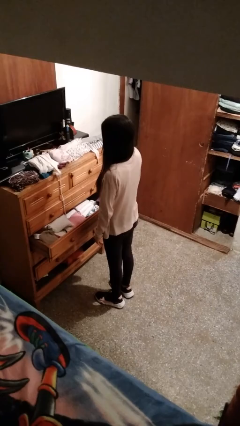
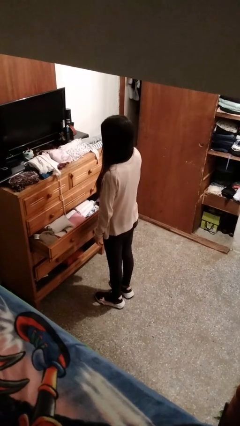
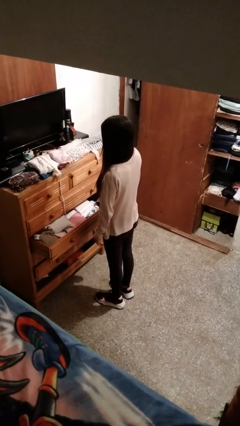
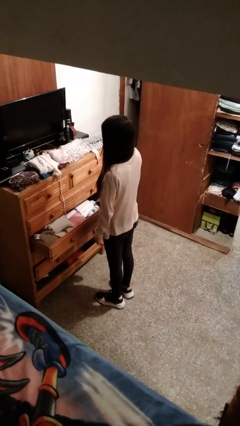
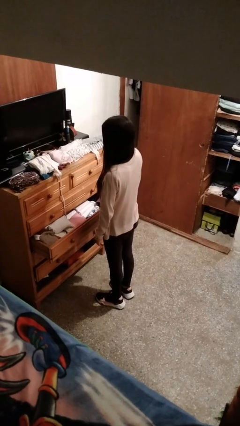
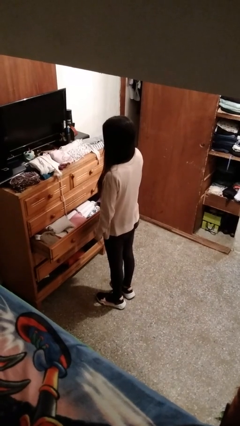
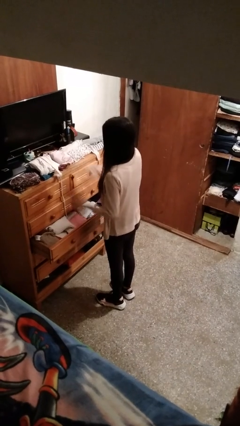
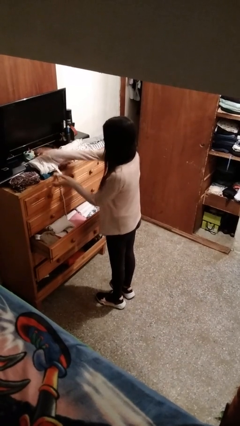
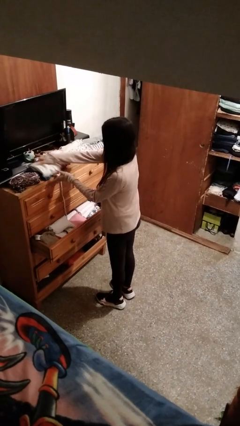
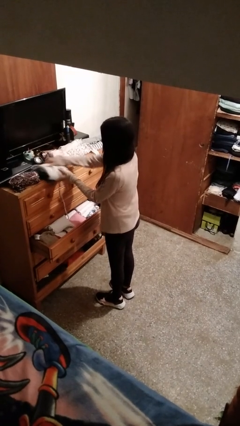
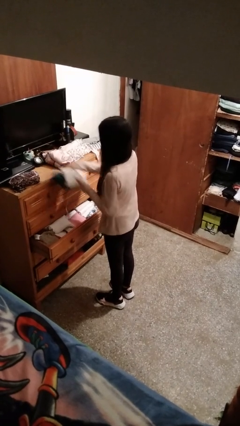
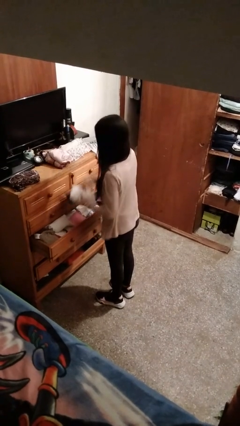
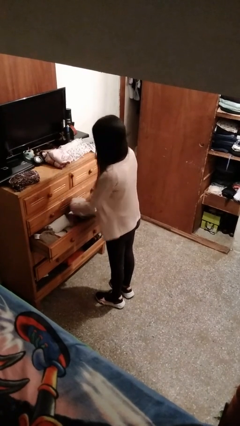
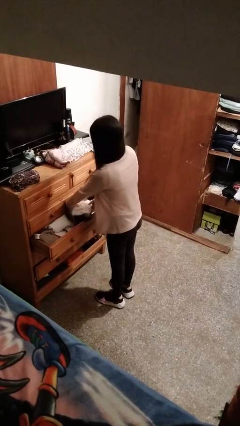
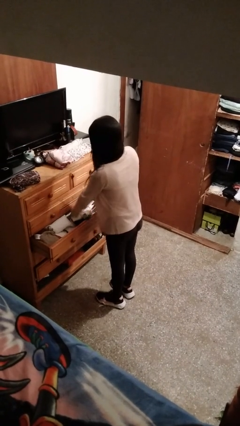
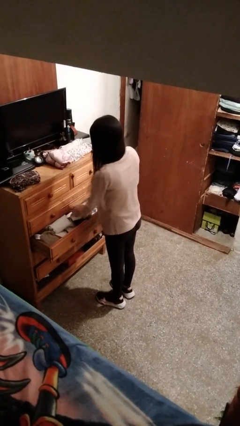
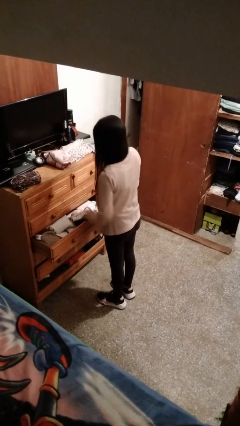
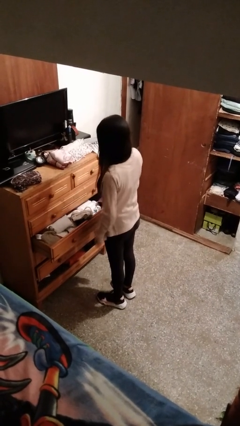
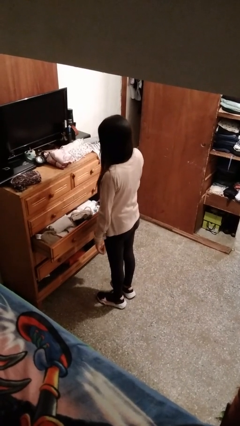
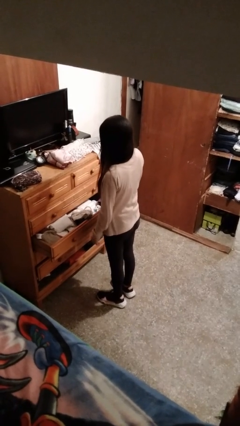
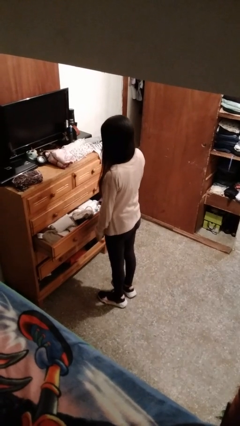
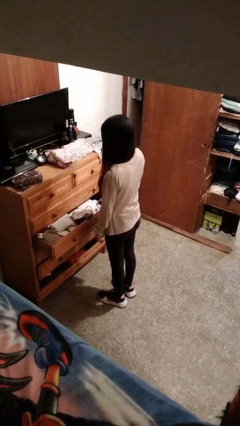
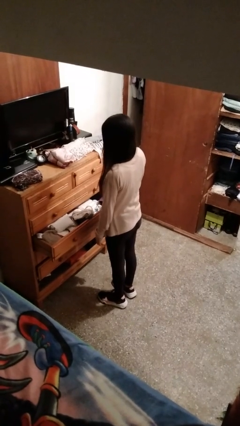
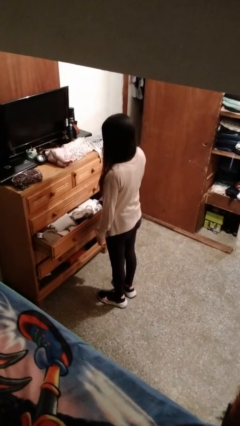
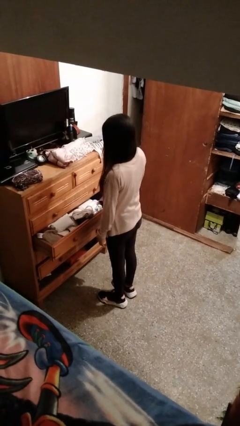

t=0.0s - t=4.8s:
person puts clothes into dresser

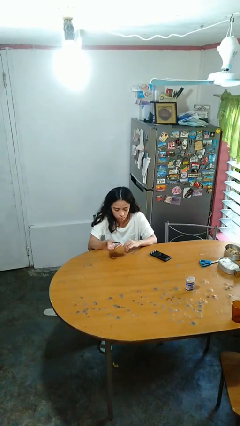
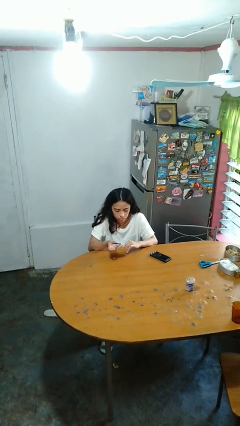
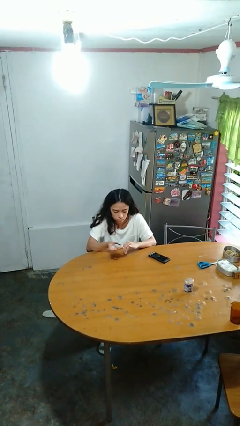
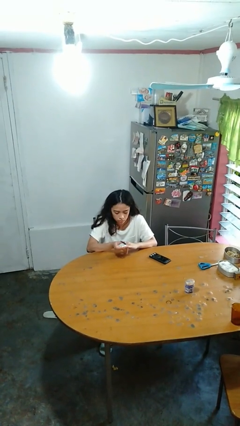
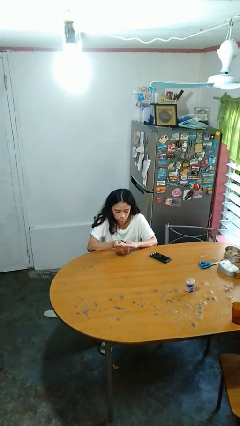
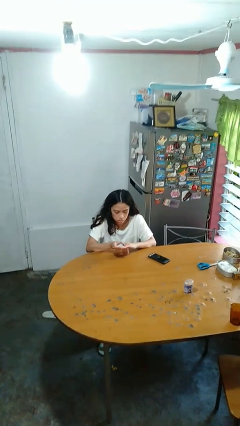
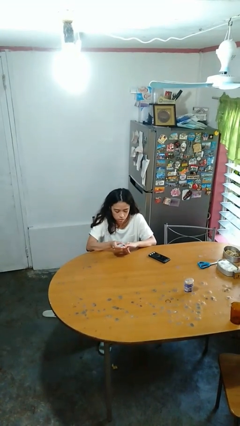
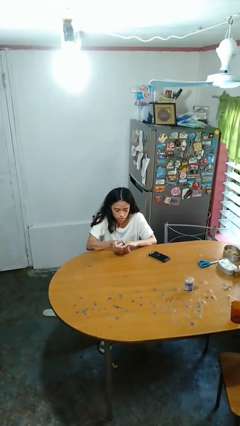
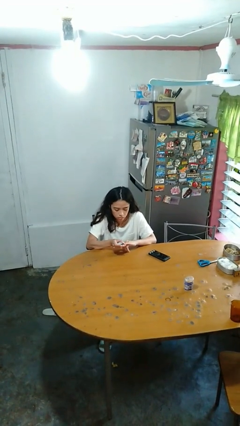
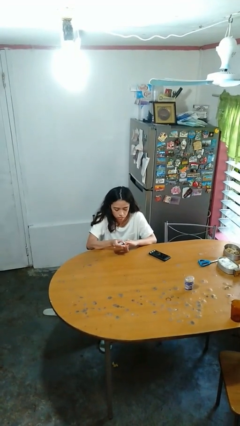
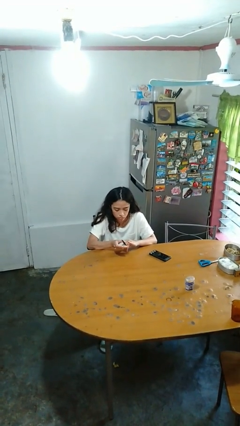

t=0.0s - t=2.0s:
person clips fingernails

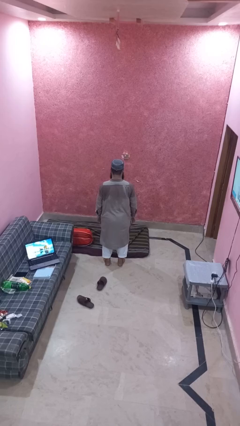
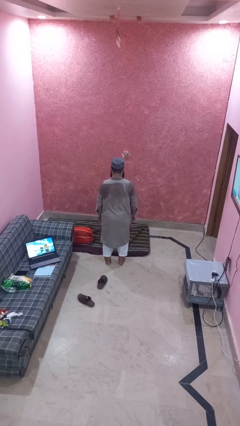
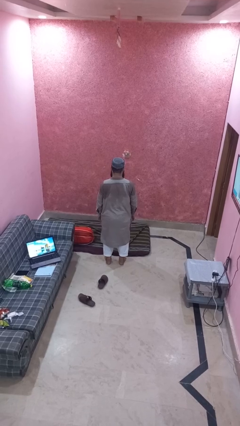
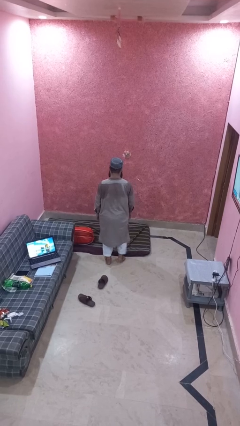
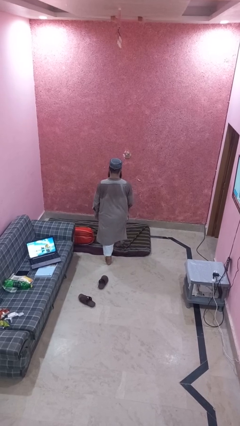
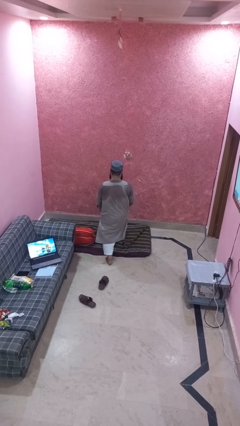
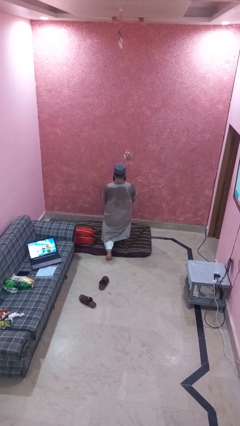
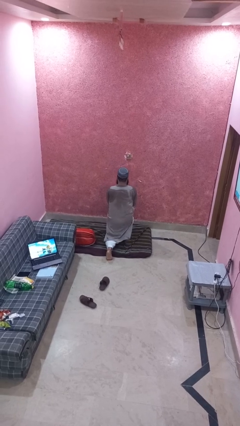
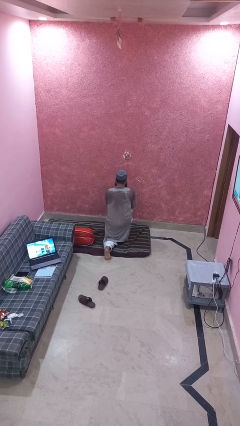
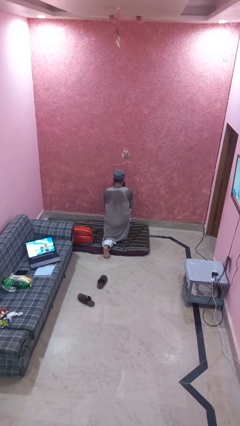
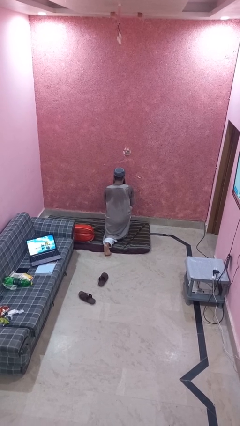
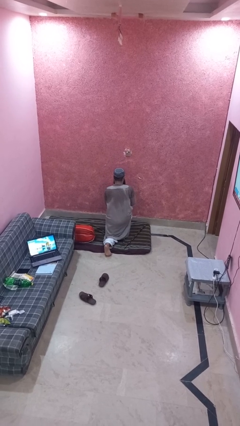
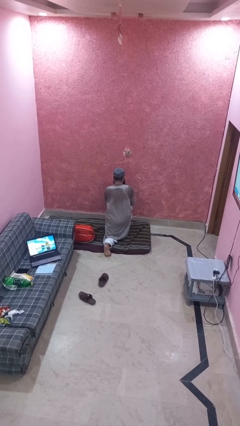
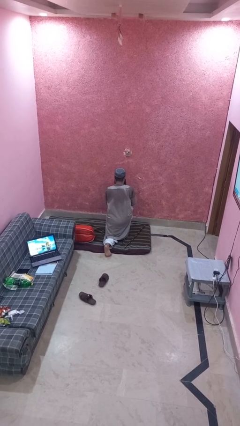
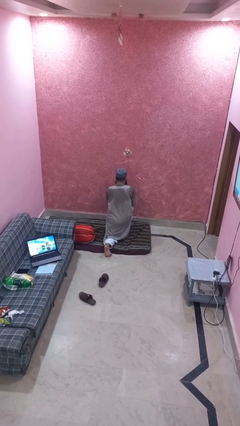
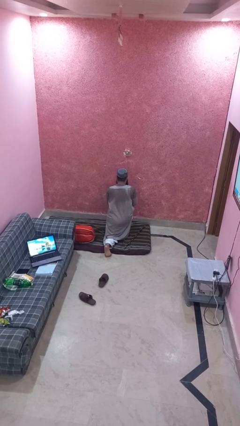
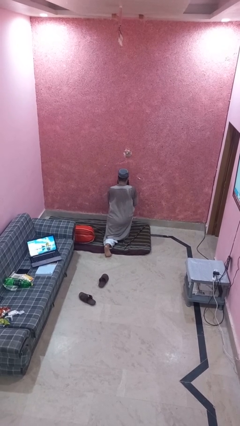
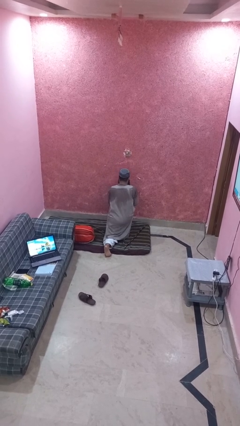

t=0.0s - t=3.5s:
person exercises with lunges

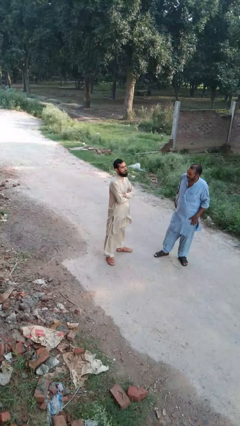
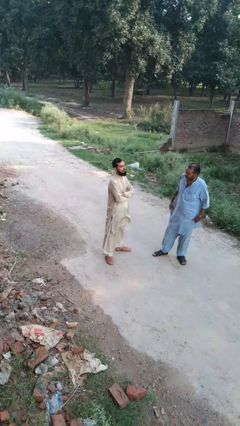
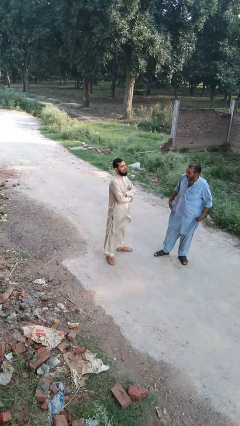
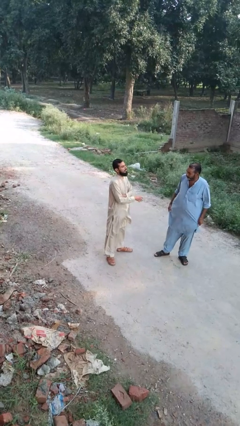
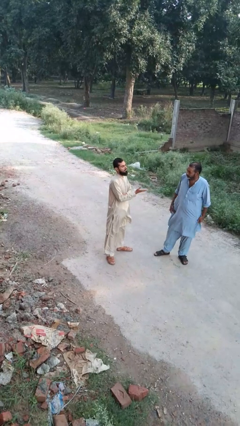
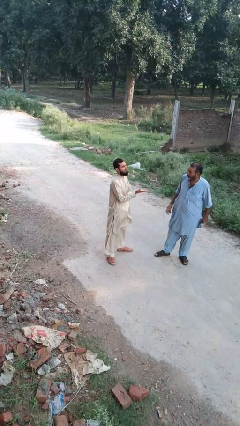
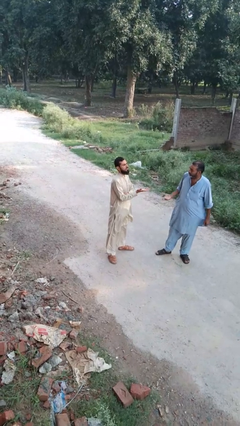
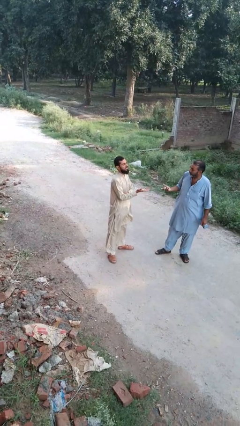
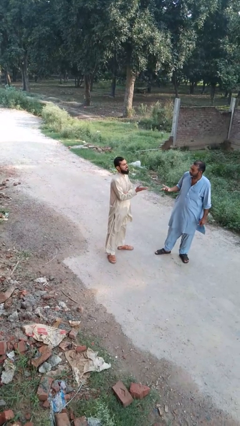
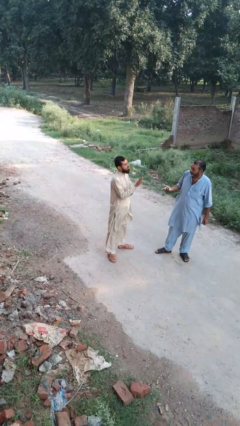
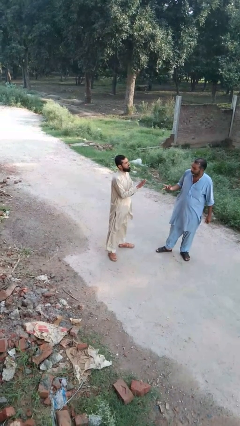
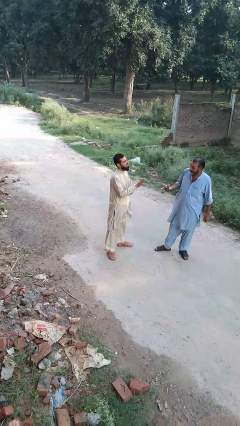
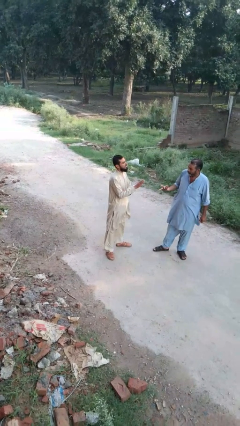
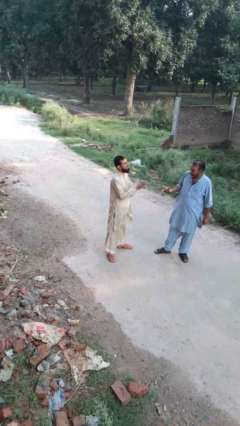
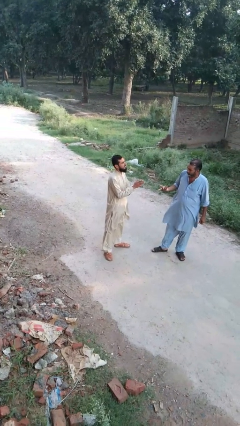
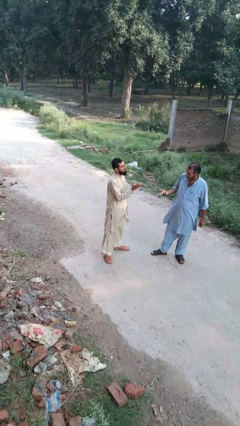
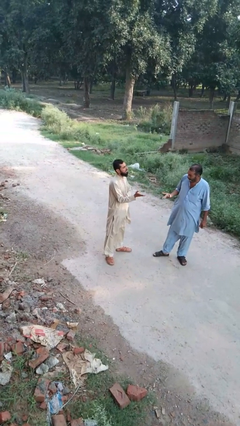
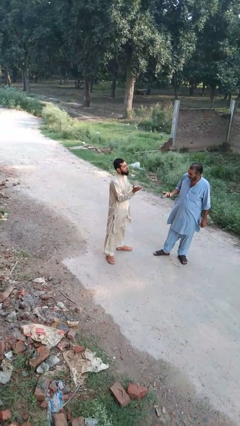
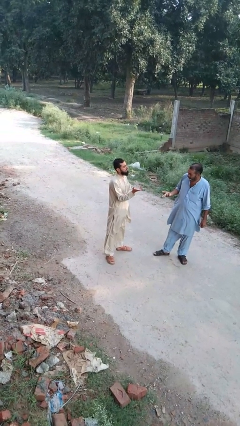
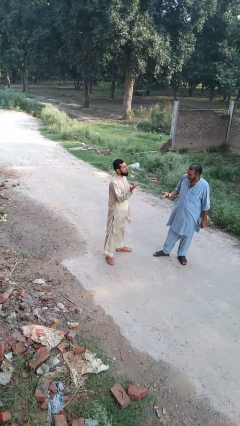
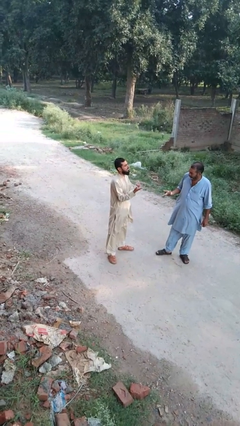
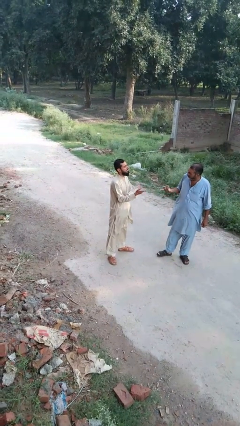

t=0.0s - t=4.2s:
person talks to person

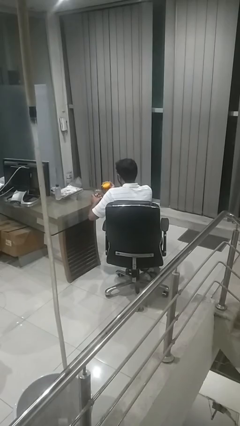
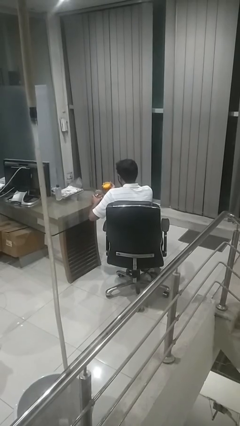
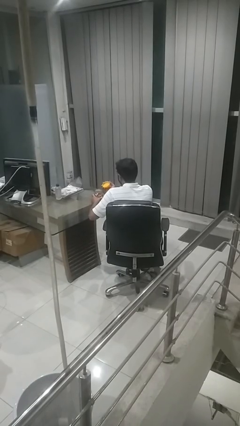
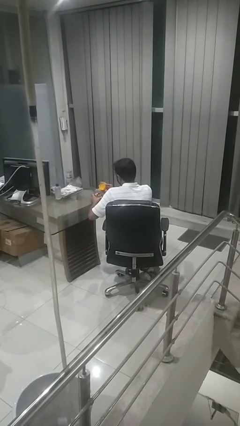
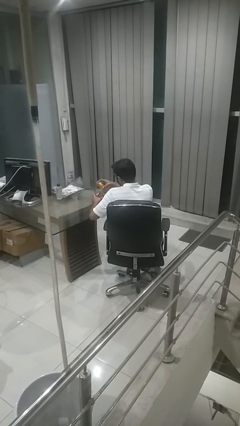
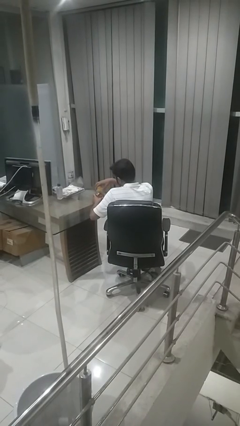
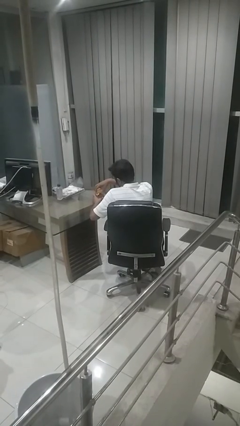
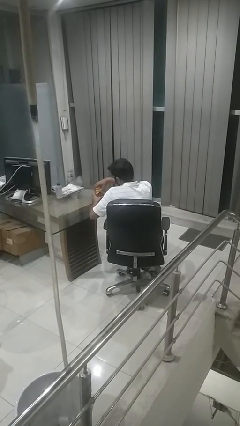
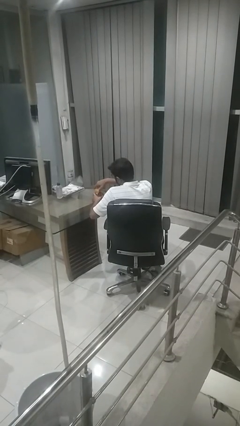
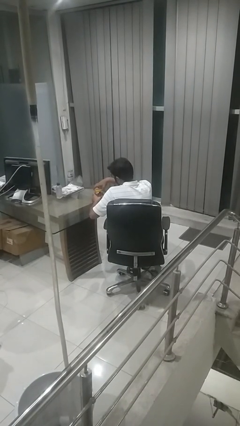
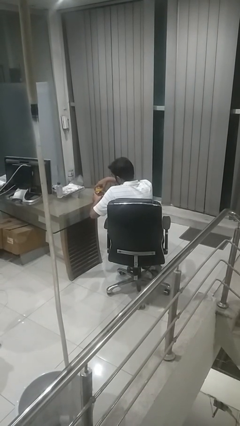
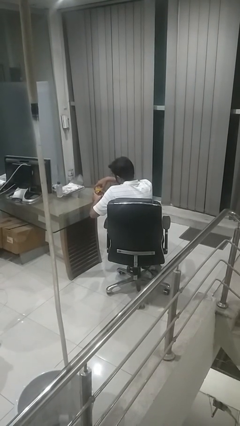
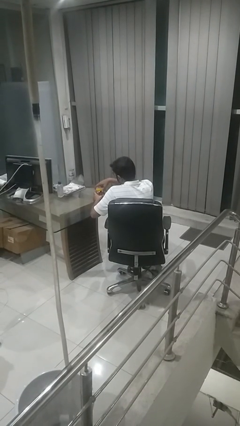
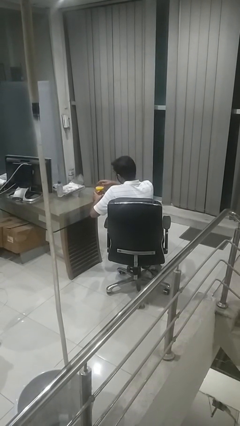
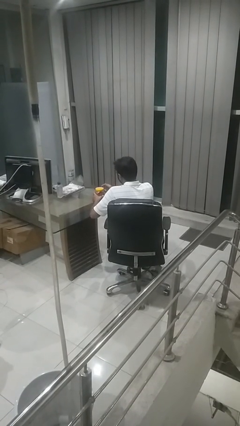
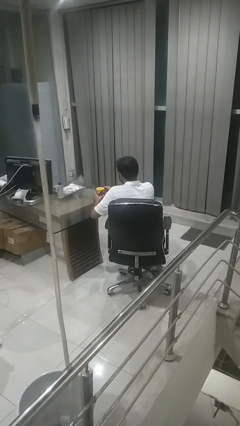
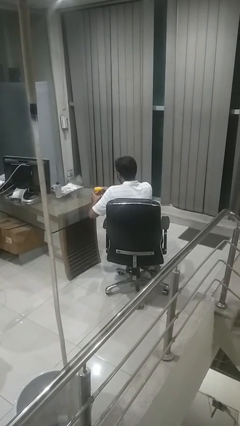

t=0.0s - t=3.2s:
person closes jar
